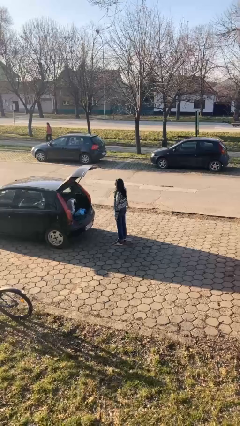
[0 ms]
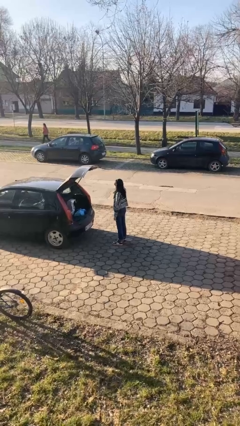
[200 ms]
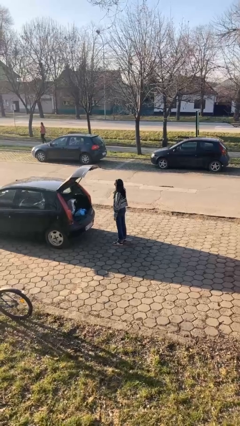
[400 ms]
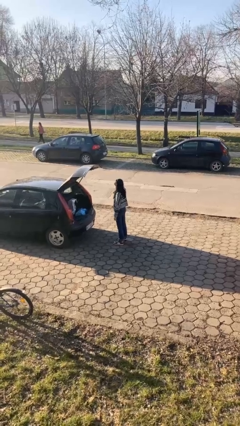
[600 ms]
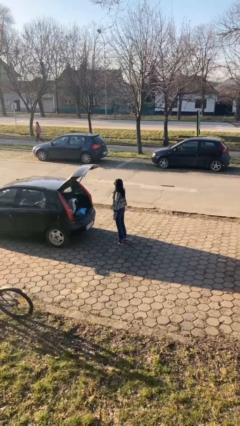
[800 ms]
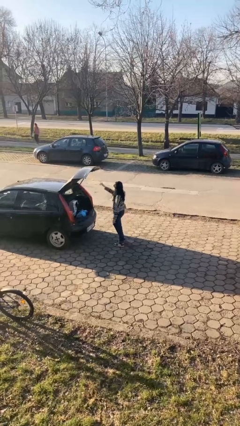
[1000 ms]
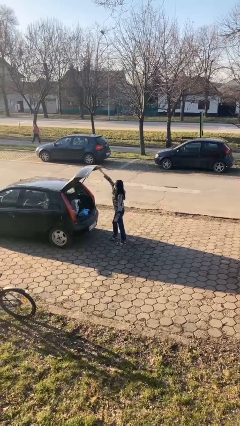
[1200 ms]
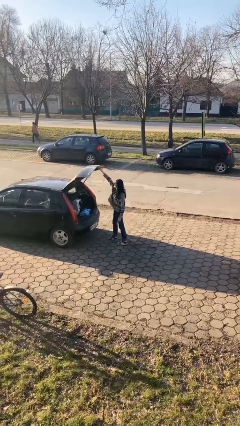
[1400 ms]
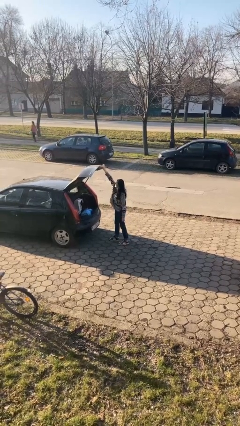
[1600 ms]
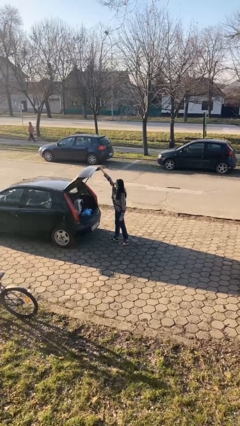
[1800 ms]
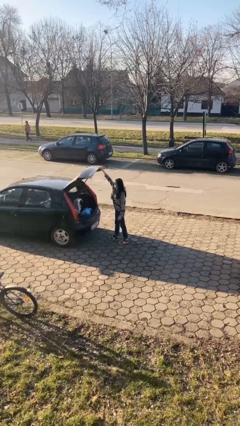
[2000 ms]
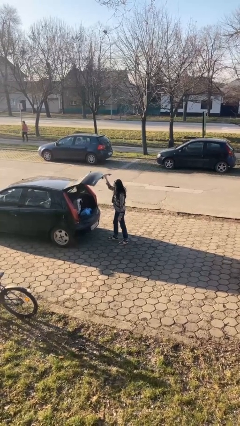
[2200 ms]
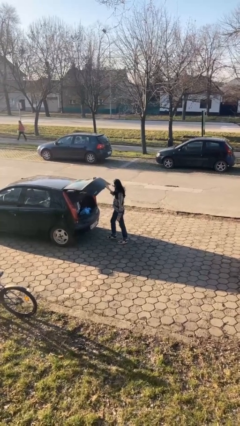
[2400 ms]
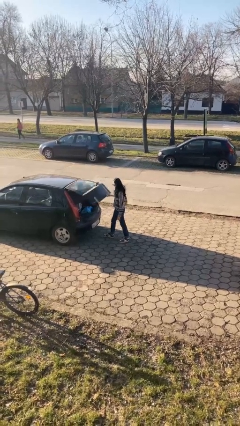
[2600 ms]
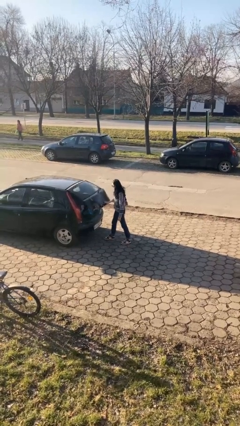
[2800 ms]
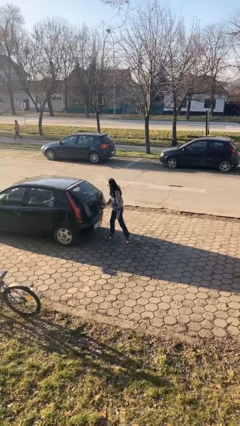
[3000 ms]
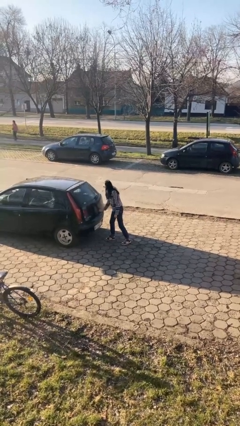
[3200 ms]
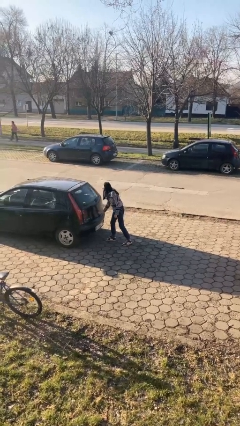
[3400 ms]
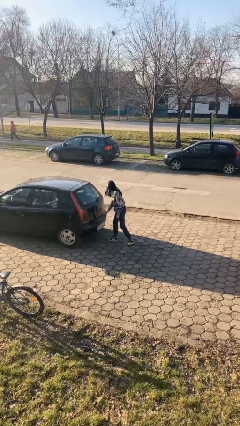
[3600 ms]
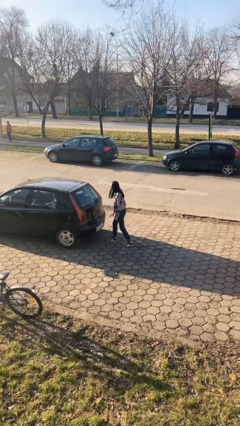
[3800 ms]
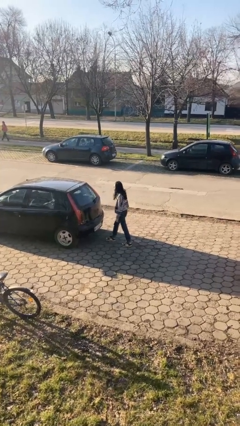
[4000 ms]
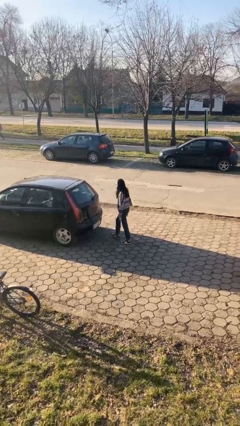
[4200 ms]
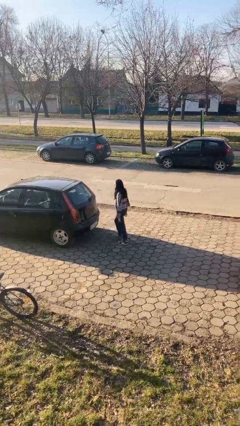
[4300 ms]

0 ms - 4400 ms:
person closes car trunk

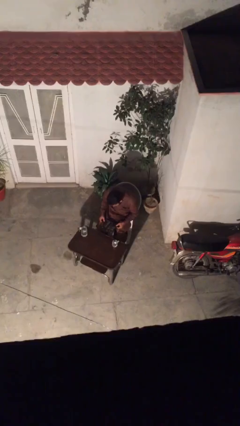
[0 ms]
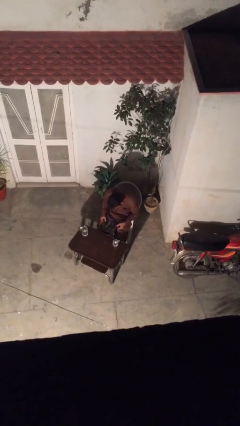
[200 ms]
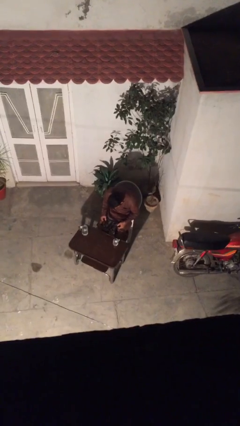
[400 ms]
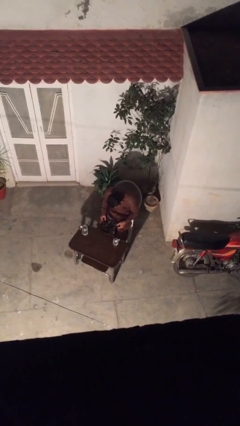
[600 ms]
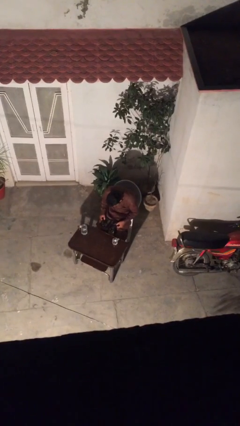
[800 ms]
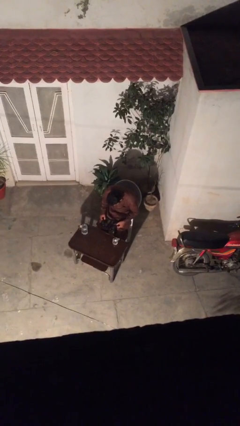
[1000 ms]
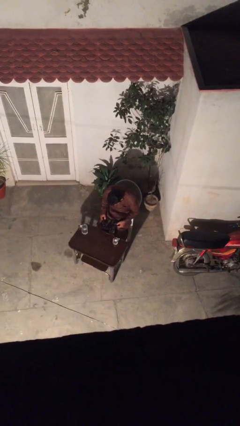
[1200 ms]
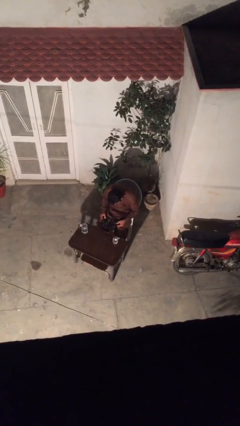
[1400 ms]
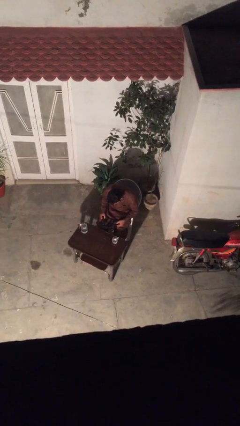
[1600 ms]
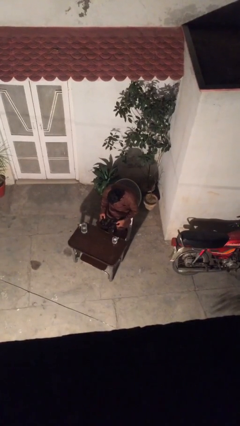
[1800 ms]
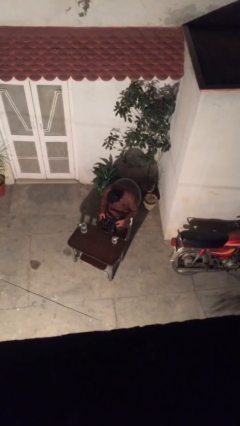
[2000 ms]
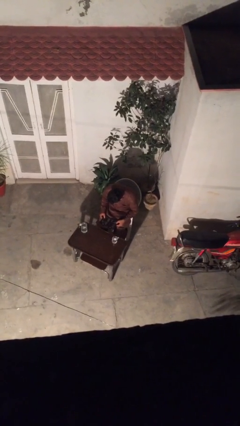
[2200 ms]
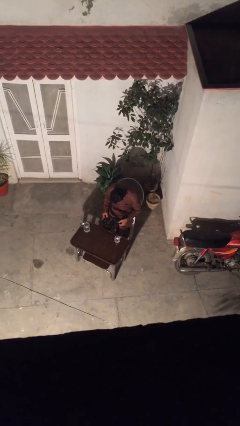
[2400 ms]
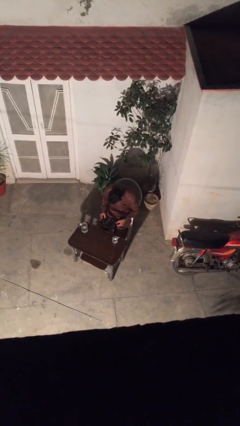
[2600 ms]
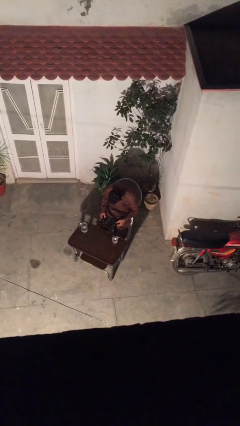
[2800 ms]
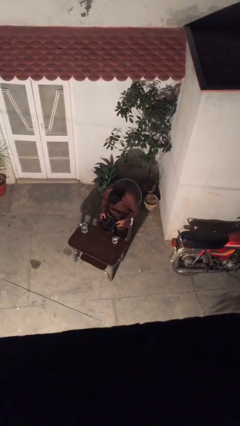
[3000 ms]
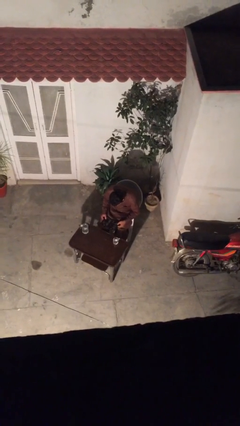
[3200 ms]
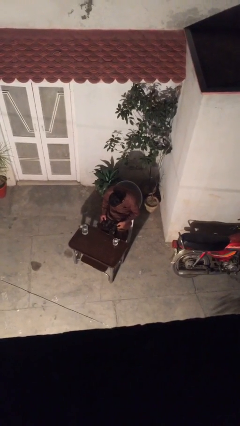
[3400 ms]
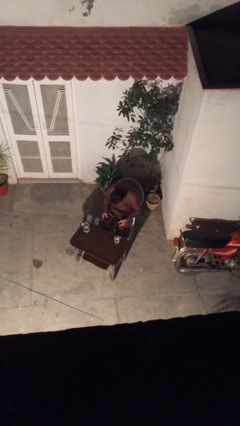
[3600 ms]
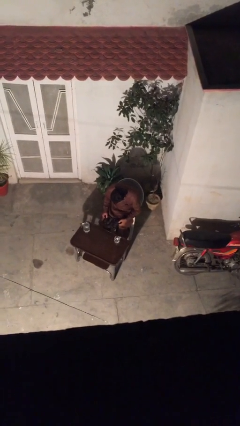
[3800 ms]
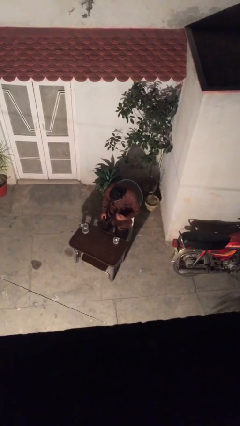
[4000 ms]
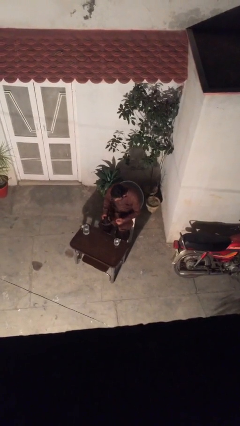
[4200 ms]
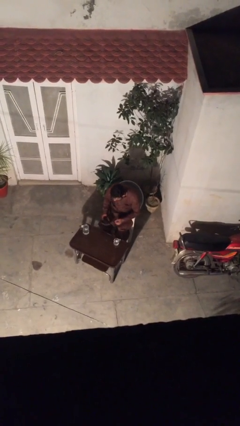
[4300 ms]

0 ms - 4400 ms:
person reads document

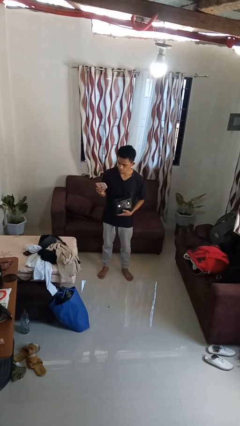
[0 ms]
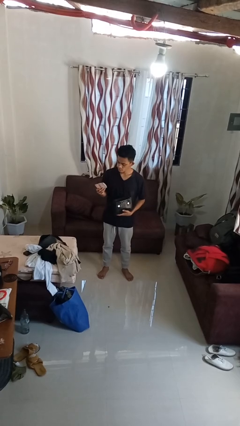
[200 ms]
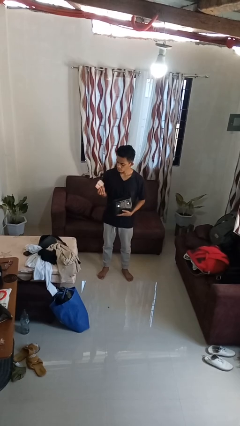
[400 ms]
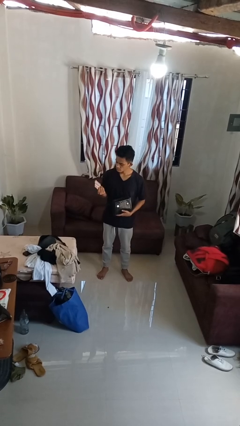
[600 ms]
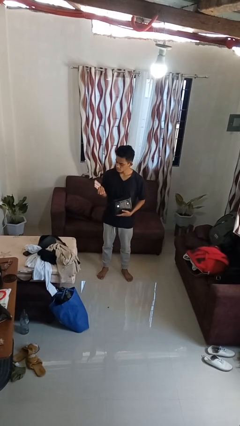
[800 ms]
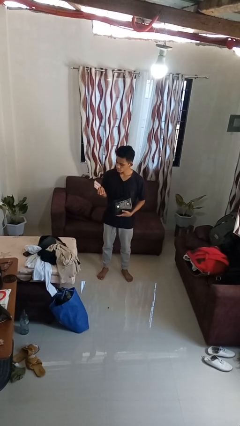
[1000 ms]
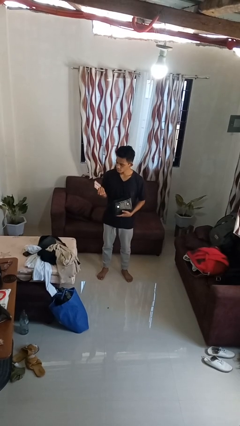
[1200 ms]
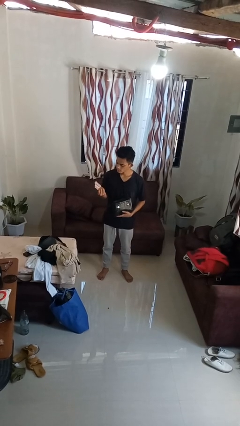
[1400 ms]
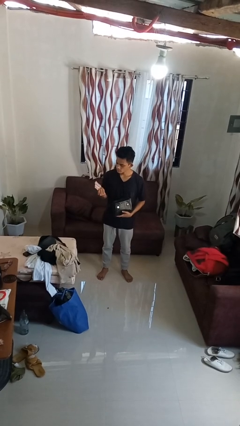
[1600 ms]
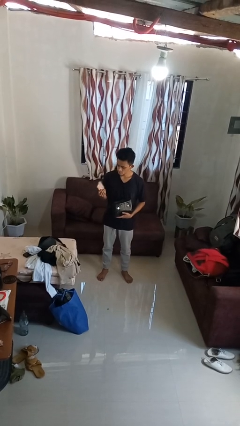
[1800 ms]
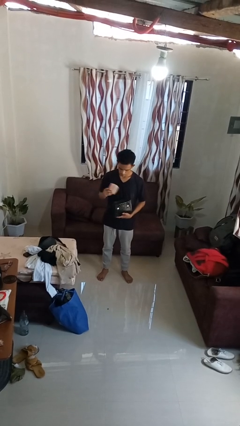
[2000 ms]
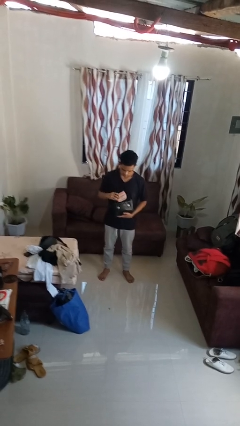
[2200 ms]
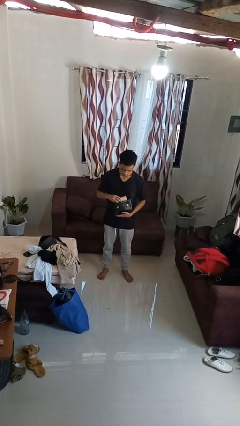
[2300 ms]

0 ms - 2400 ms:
person takes object from purse

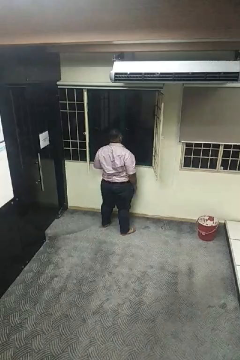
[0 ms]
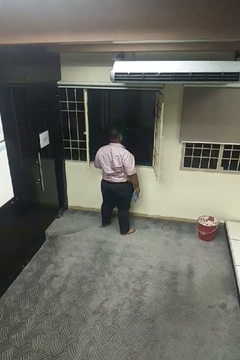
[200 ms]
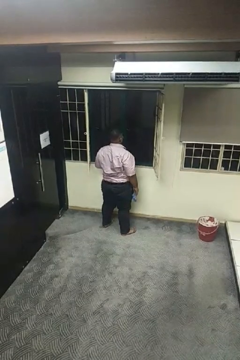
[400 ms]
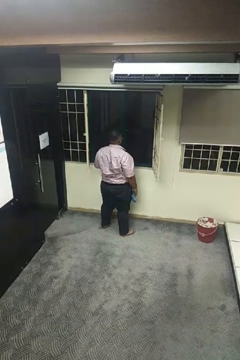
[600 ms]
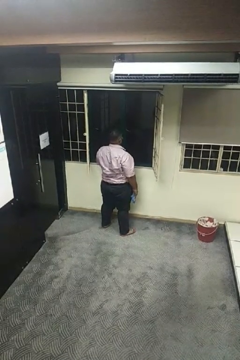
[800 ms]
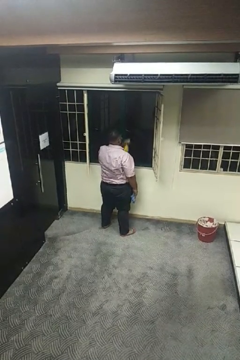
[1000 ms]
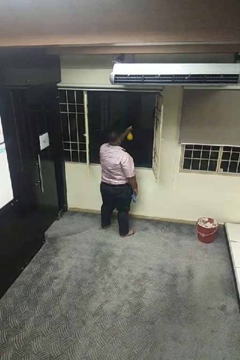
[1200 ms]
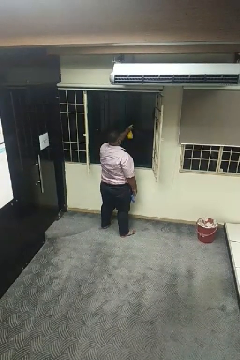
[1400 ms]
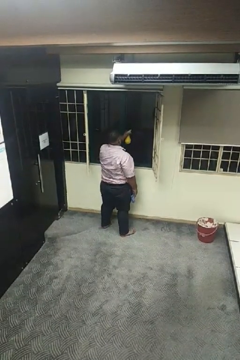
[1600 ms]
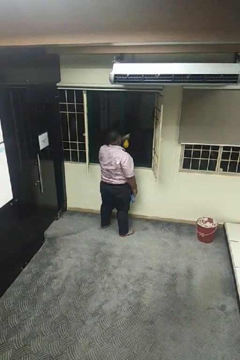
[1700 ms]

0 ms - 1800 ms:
person sprays from bottle

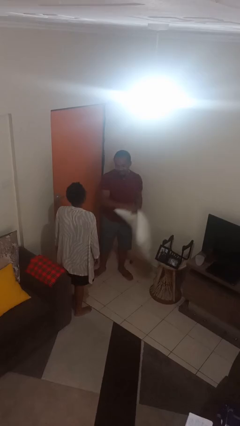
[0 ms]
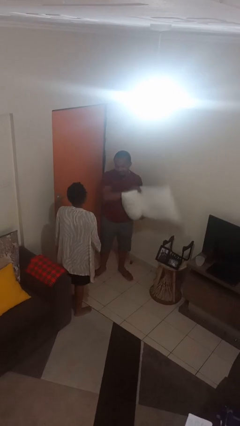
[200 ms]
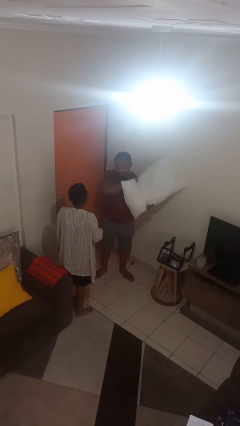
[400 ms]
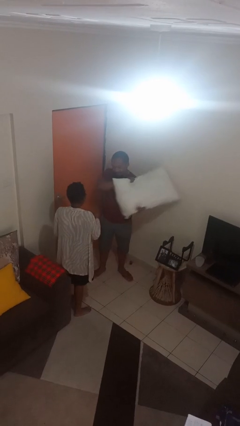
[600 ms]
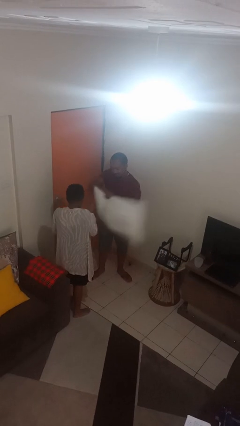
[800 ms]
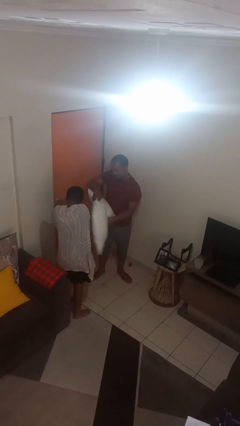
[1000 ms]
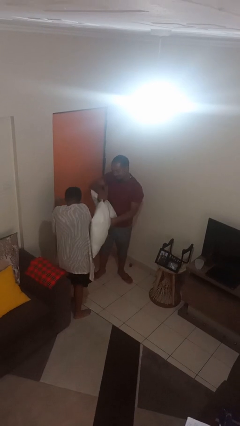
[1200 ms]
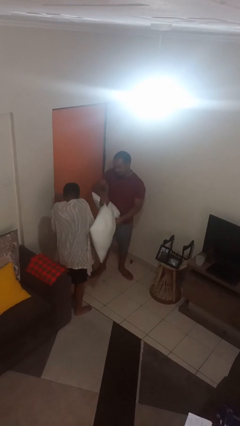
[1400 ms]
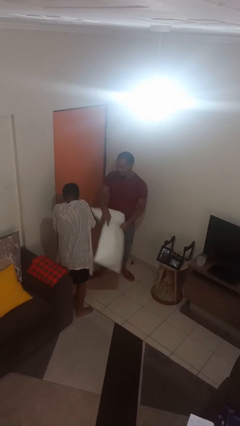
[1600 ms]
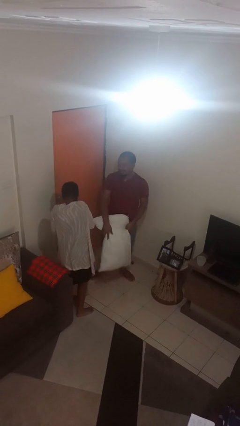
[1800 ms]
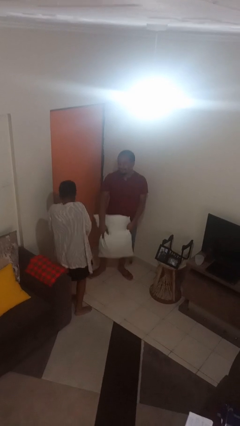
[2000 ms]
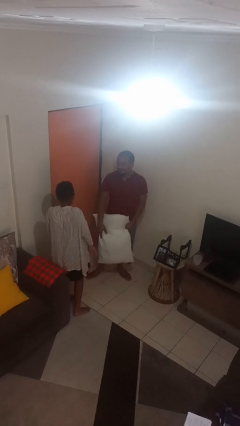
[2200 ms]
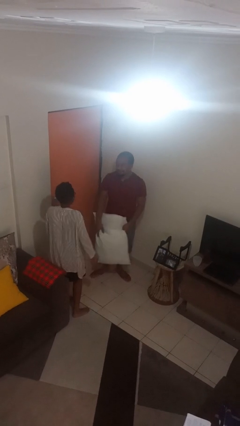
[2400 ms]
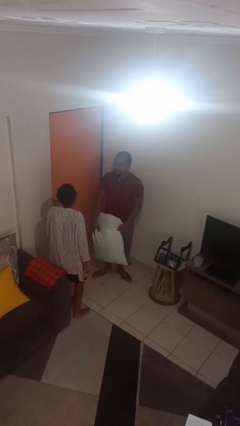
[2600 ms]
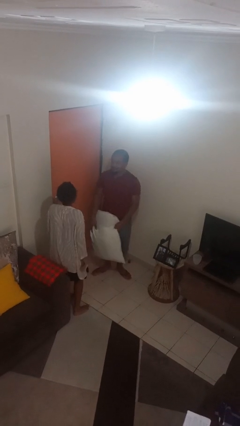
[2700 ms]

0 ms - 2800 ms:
person hits person with pillow

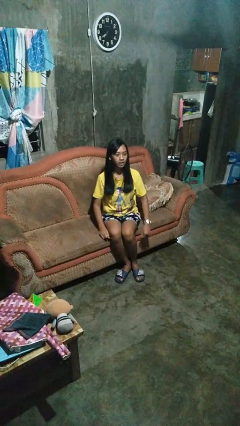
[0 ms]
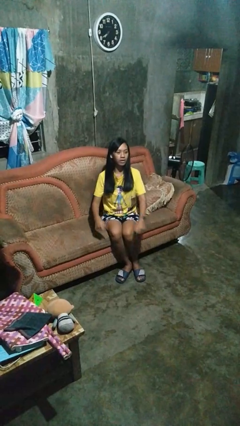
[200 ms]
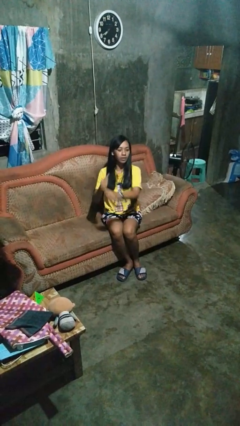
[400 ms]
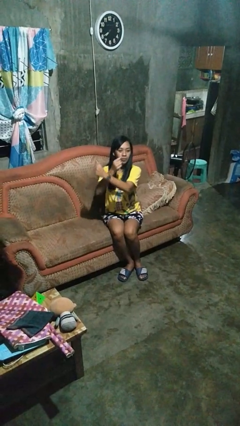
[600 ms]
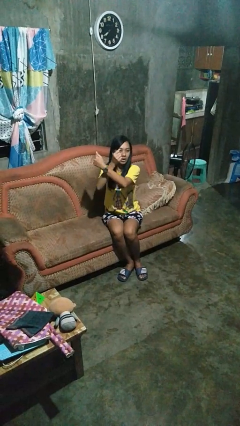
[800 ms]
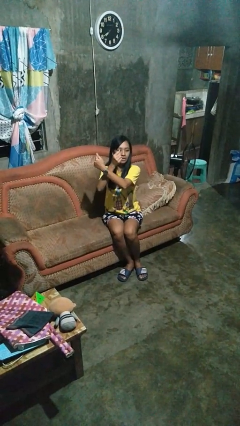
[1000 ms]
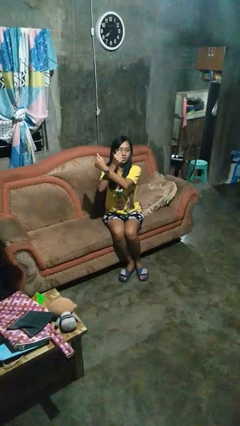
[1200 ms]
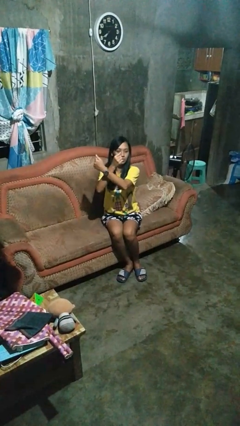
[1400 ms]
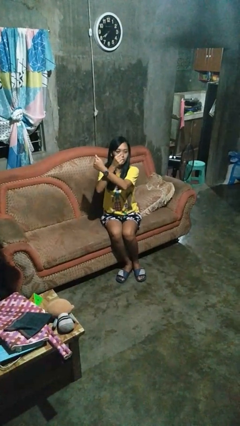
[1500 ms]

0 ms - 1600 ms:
person gestures arms x

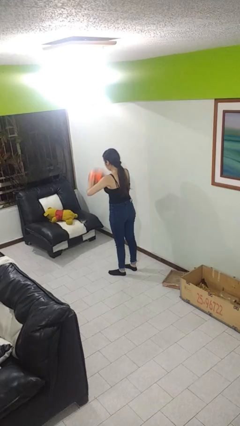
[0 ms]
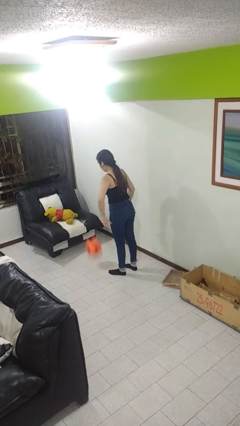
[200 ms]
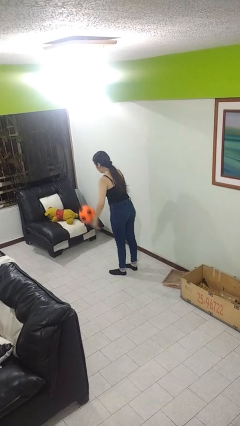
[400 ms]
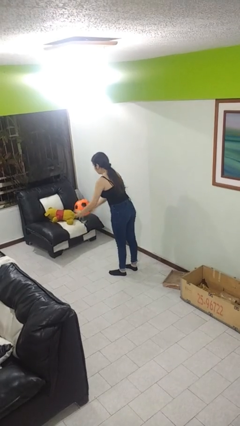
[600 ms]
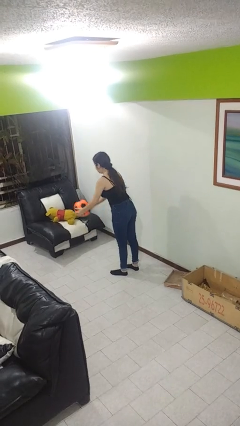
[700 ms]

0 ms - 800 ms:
person bounces ball on floor
